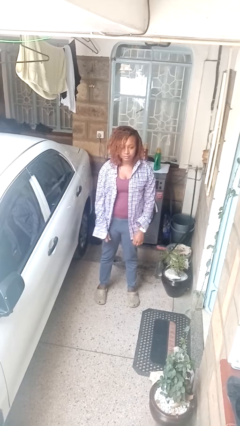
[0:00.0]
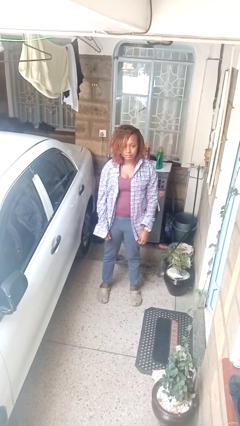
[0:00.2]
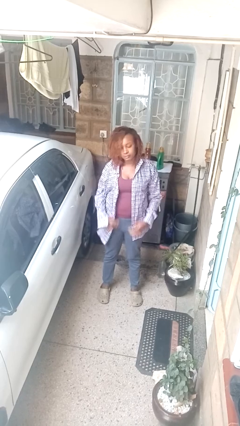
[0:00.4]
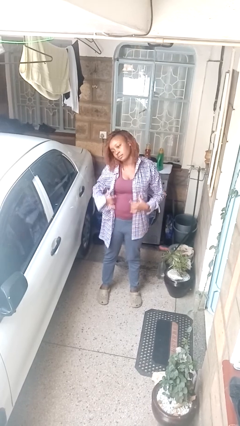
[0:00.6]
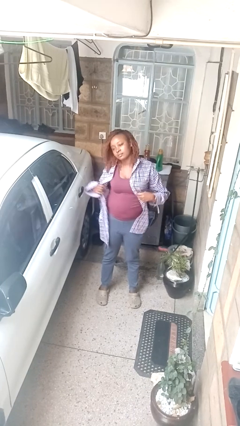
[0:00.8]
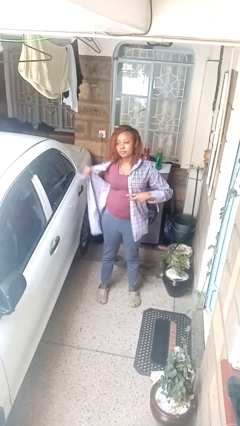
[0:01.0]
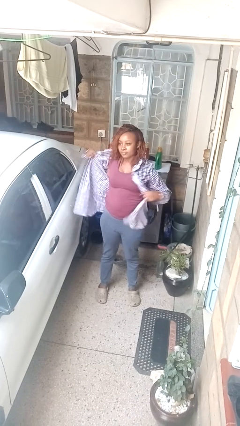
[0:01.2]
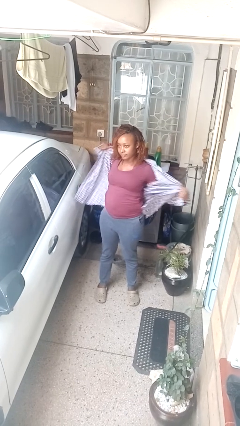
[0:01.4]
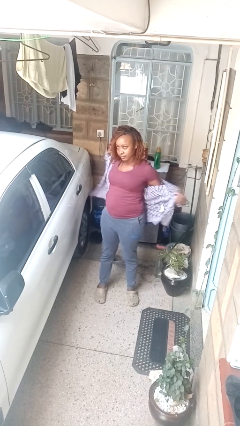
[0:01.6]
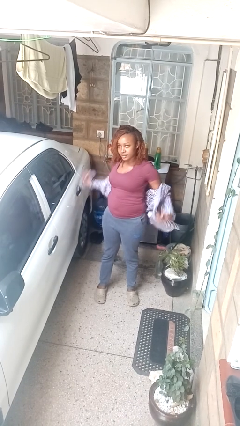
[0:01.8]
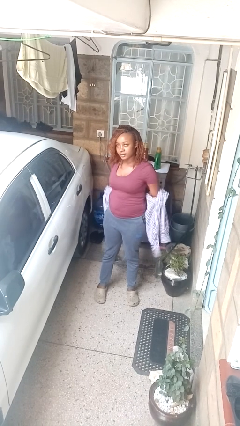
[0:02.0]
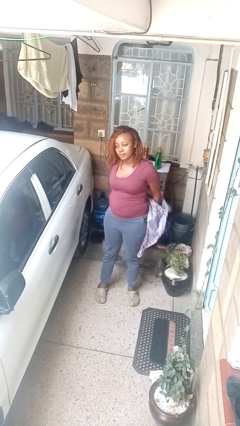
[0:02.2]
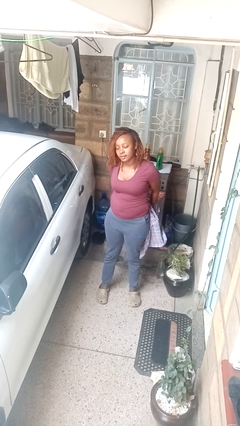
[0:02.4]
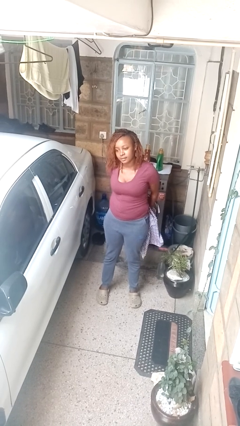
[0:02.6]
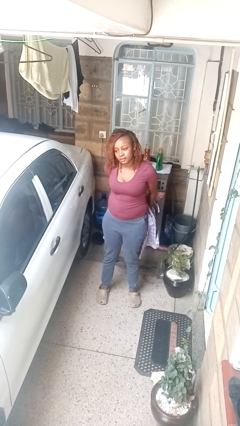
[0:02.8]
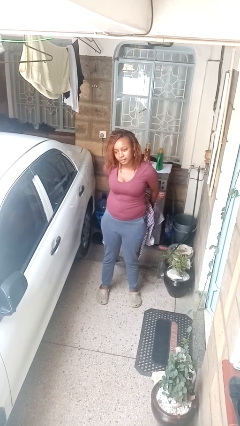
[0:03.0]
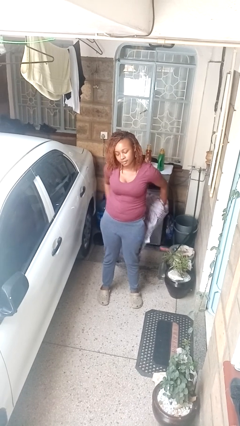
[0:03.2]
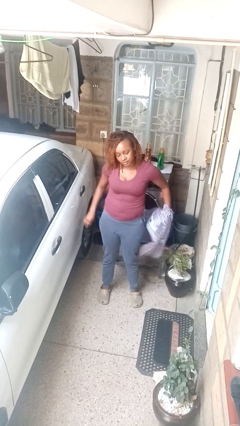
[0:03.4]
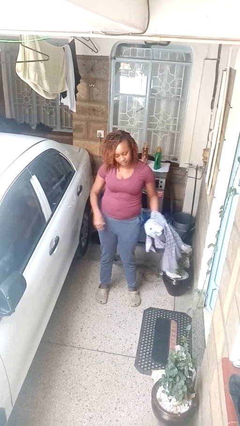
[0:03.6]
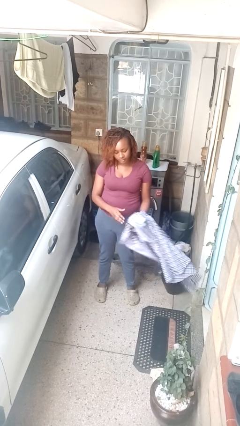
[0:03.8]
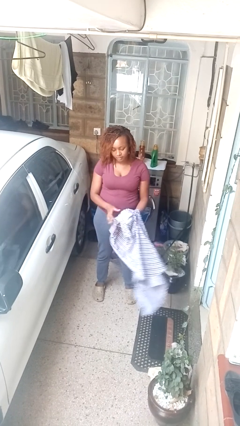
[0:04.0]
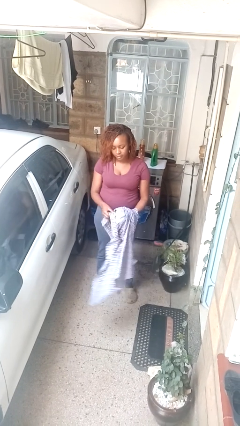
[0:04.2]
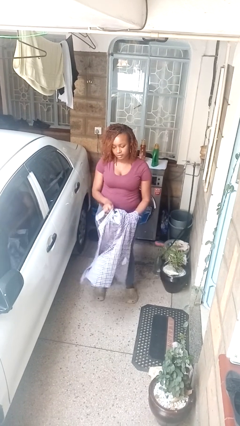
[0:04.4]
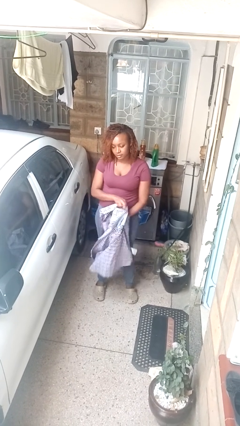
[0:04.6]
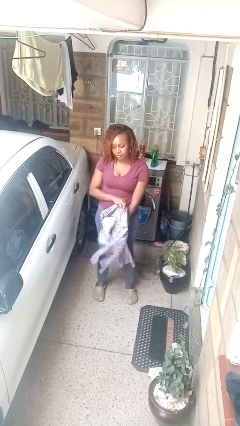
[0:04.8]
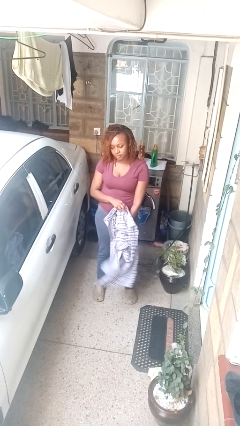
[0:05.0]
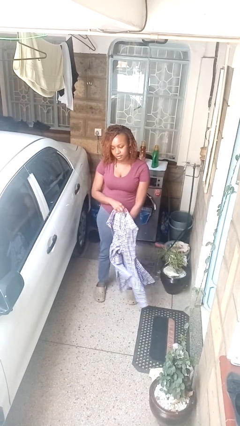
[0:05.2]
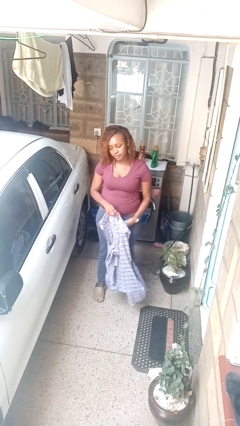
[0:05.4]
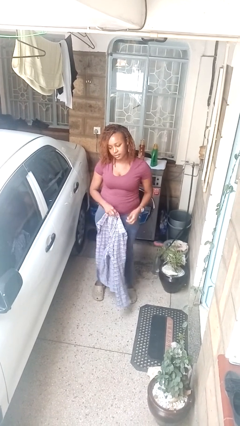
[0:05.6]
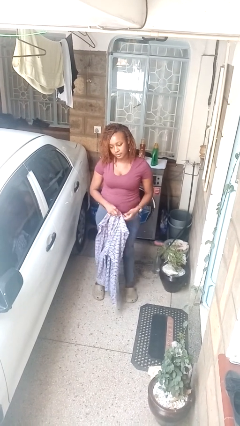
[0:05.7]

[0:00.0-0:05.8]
person takes off shirt

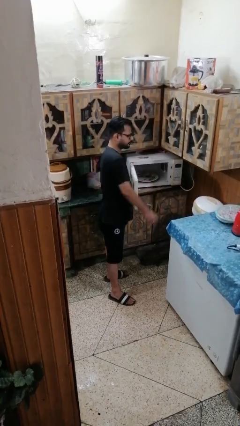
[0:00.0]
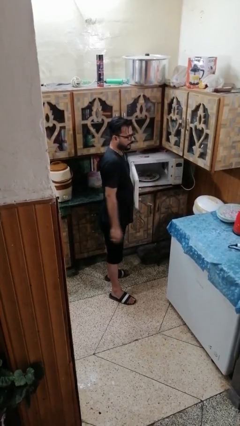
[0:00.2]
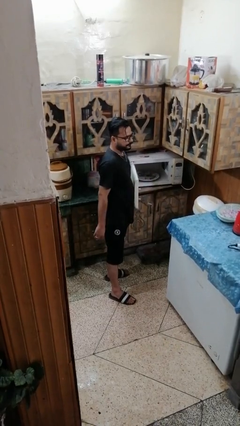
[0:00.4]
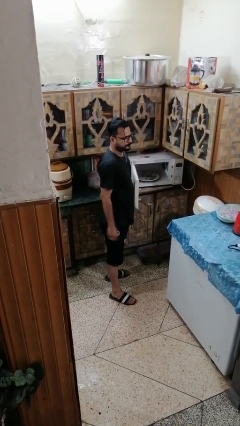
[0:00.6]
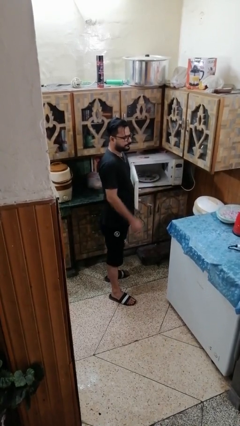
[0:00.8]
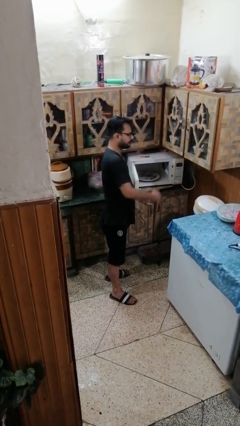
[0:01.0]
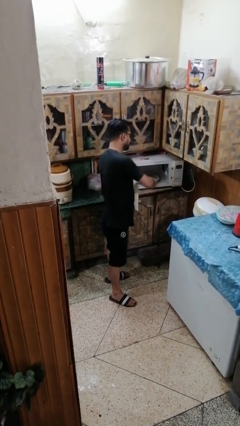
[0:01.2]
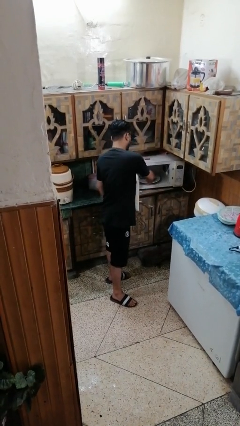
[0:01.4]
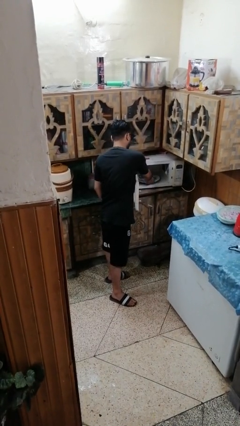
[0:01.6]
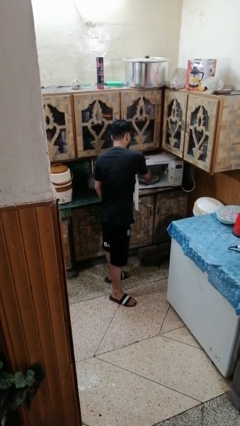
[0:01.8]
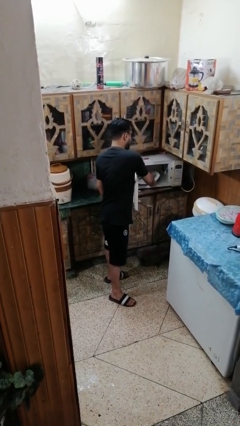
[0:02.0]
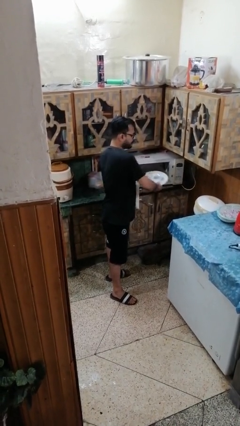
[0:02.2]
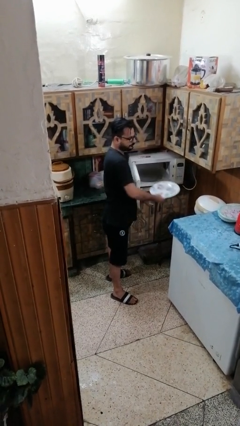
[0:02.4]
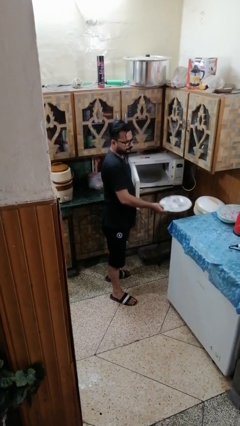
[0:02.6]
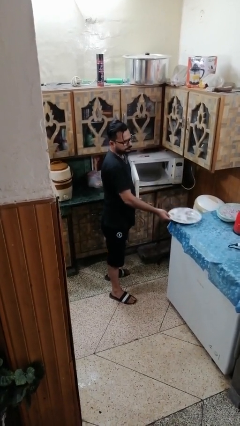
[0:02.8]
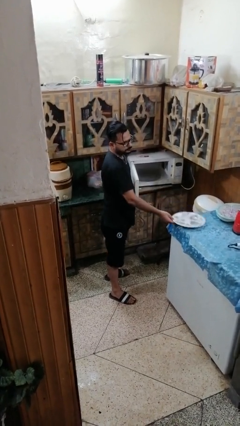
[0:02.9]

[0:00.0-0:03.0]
person takes object from microwave

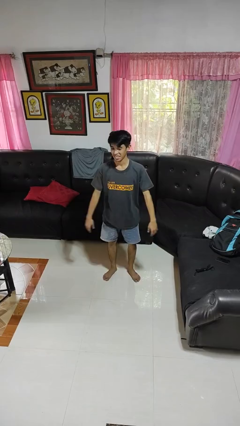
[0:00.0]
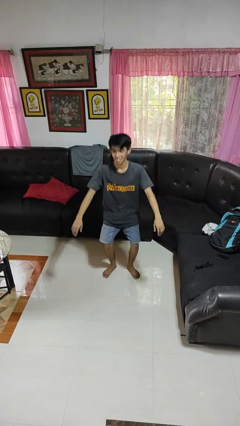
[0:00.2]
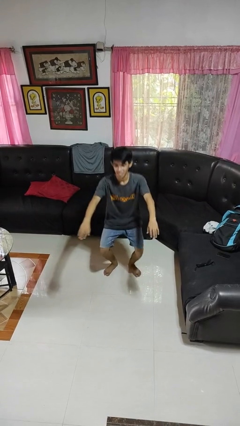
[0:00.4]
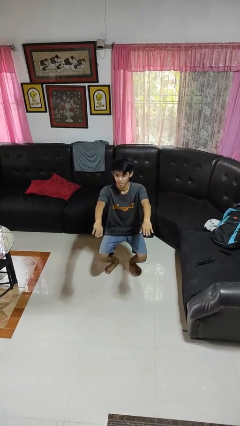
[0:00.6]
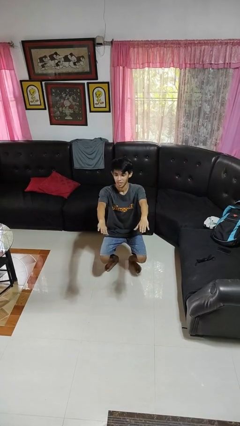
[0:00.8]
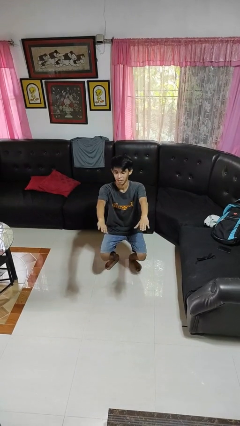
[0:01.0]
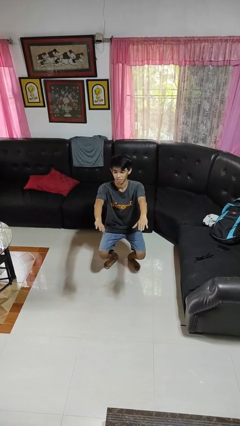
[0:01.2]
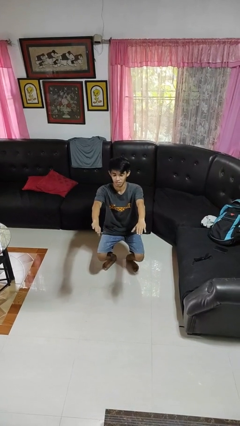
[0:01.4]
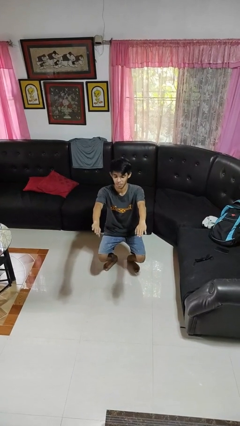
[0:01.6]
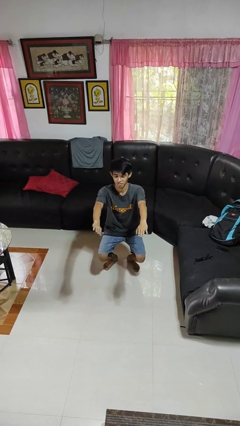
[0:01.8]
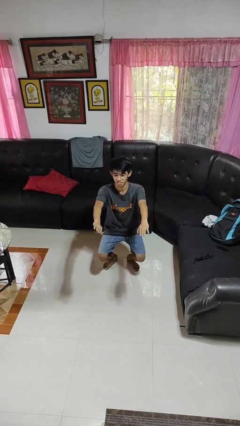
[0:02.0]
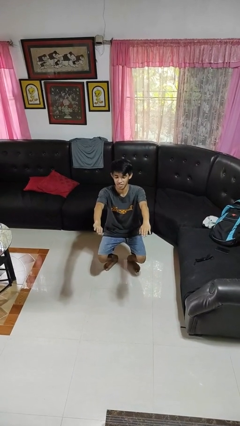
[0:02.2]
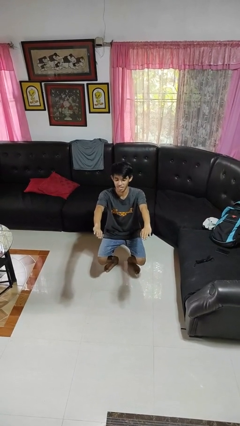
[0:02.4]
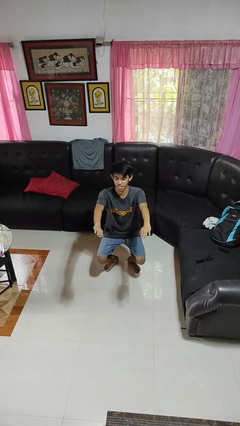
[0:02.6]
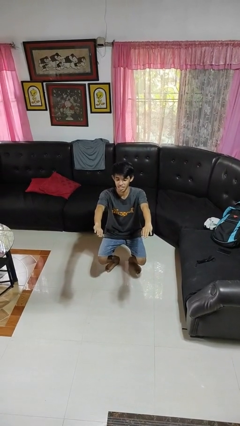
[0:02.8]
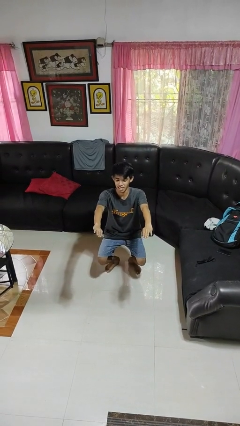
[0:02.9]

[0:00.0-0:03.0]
person squats

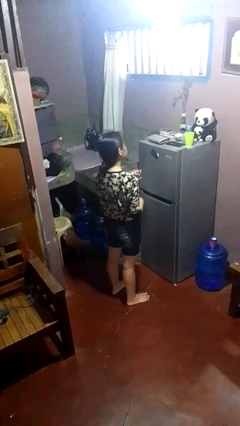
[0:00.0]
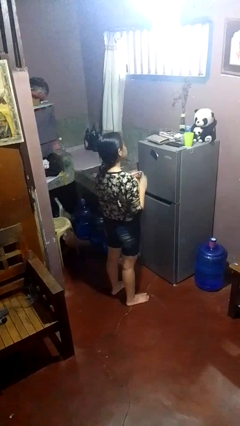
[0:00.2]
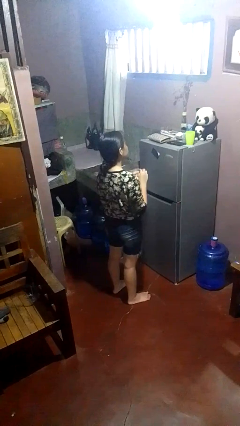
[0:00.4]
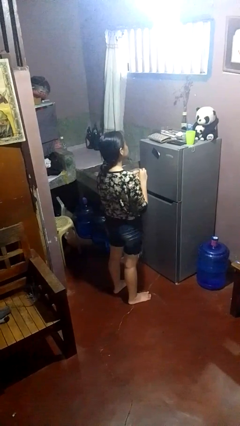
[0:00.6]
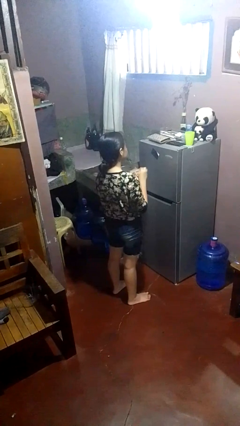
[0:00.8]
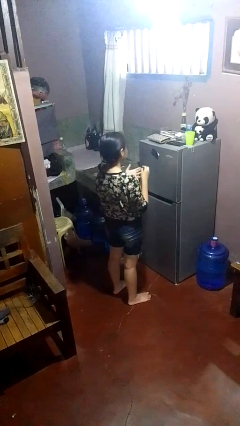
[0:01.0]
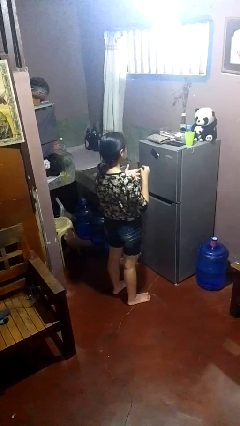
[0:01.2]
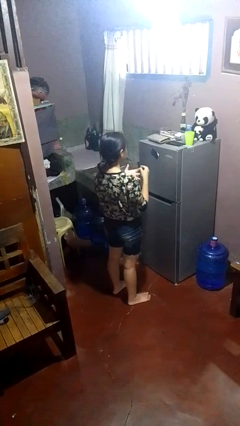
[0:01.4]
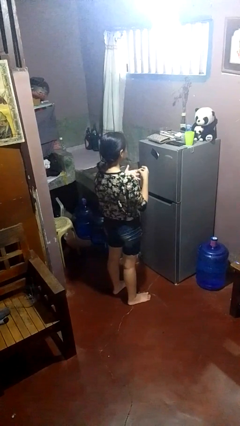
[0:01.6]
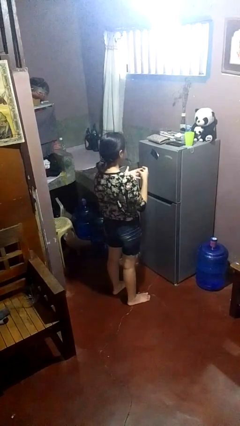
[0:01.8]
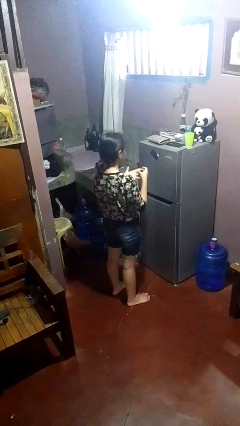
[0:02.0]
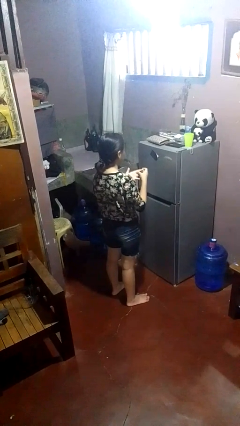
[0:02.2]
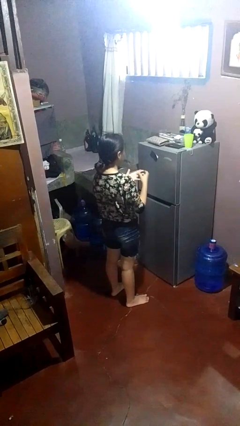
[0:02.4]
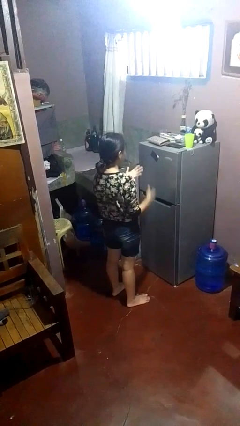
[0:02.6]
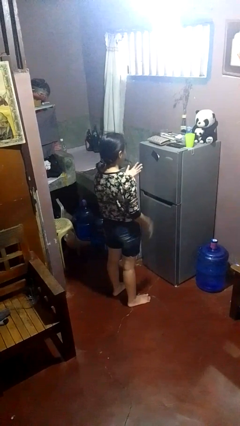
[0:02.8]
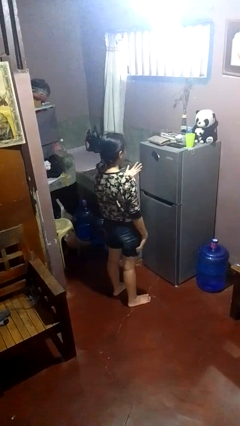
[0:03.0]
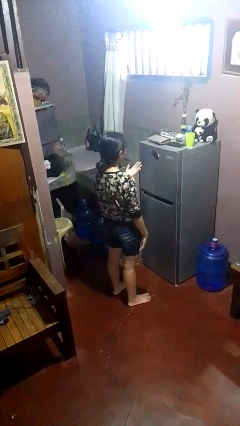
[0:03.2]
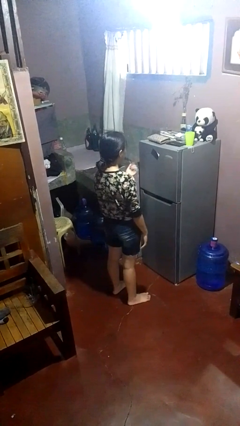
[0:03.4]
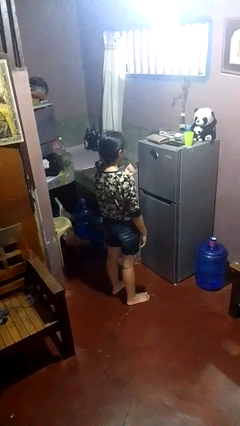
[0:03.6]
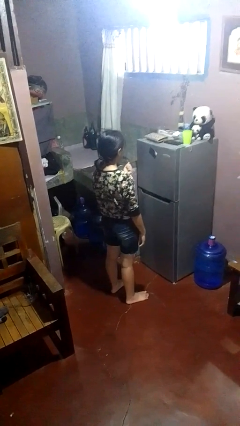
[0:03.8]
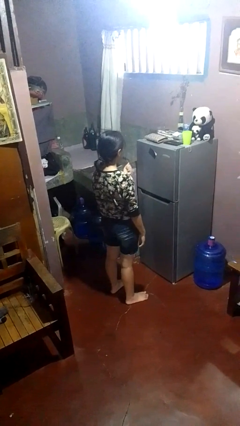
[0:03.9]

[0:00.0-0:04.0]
person puts on ring

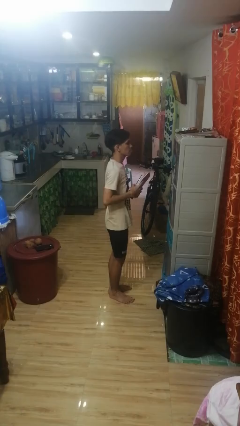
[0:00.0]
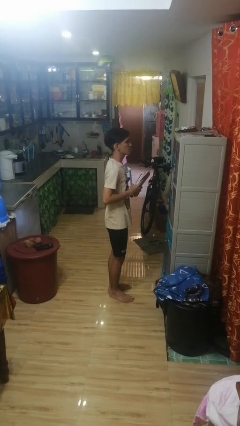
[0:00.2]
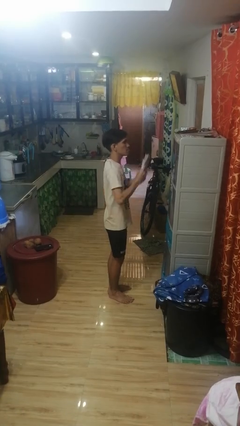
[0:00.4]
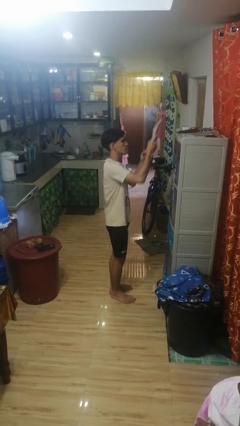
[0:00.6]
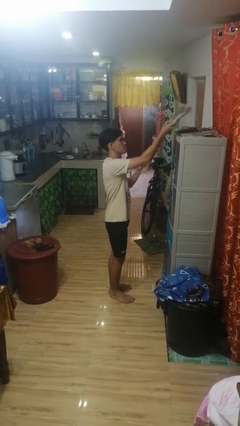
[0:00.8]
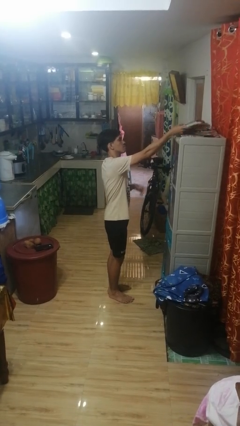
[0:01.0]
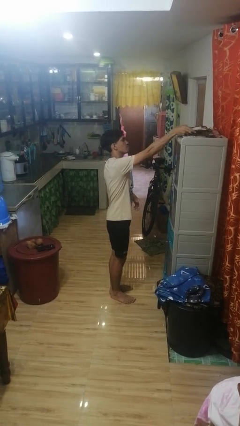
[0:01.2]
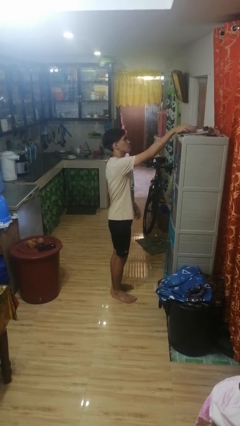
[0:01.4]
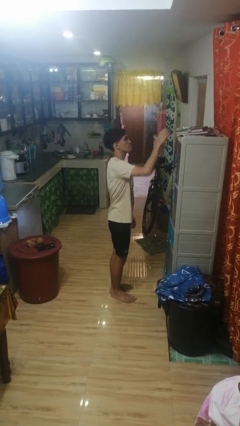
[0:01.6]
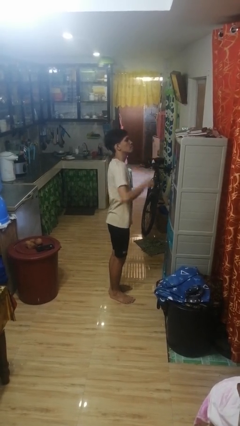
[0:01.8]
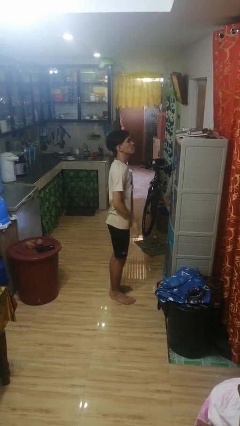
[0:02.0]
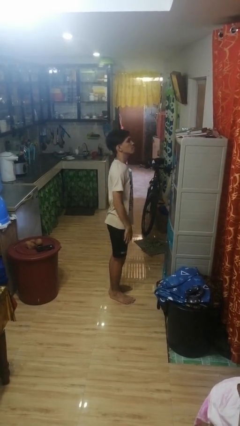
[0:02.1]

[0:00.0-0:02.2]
person puts down object on shelf
